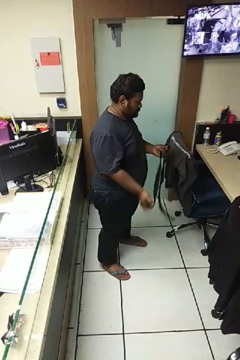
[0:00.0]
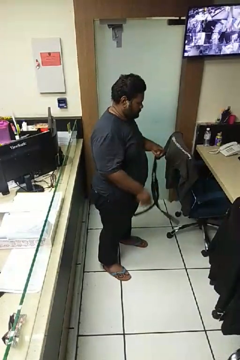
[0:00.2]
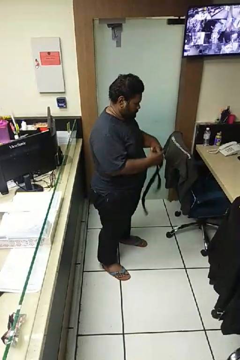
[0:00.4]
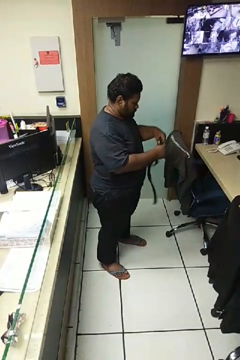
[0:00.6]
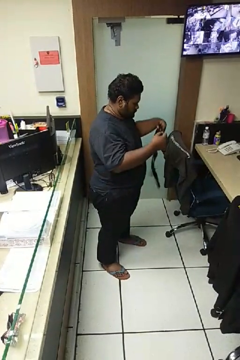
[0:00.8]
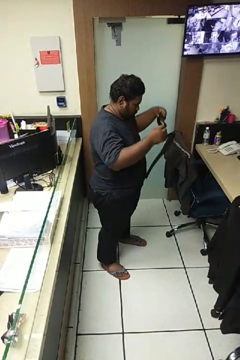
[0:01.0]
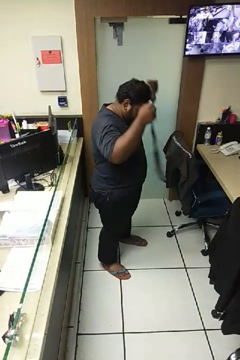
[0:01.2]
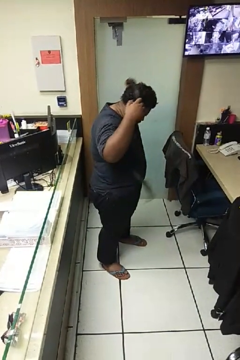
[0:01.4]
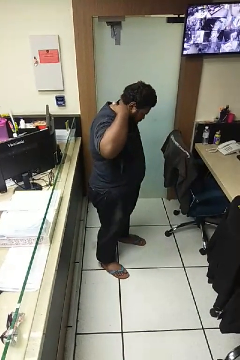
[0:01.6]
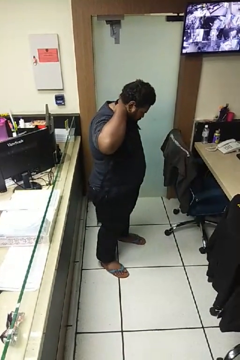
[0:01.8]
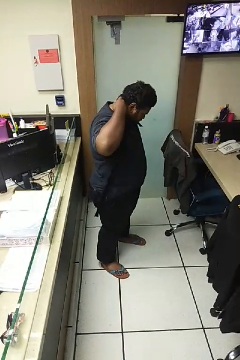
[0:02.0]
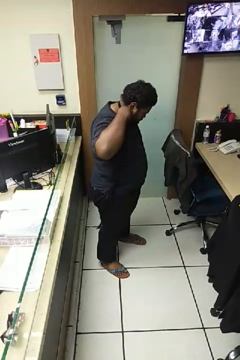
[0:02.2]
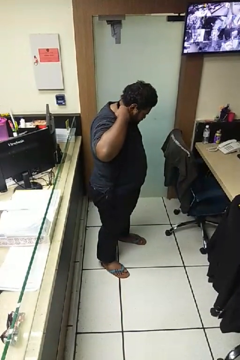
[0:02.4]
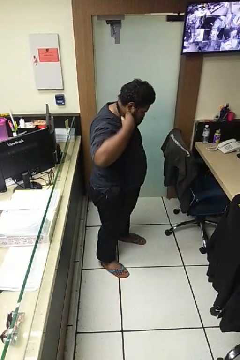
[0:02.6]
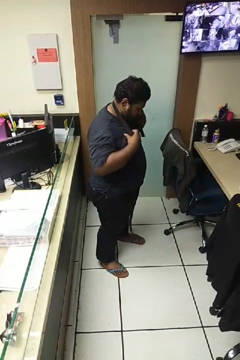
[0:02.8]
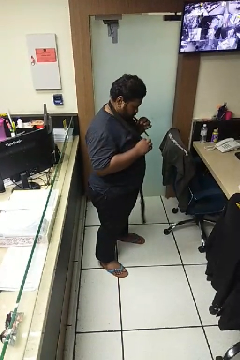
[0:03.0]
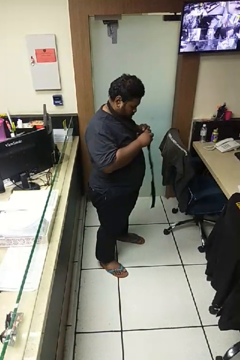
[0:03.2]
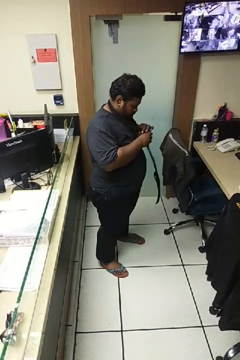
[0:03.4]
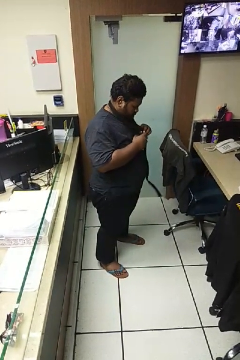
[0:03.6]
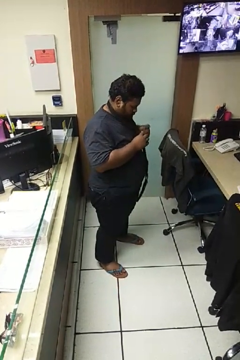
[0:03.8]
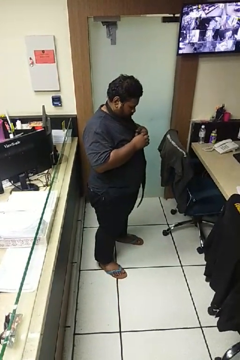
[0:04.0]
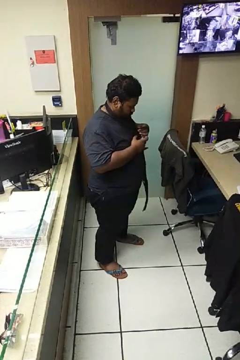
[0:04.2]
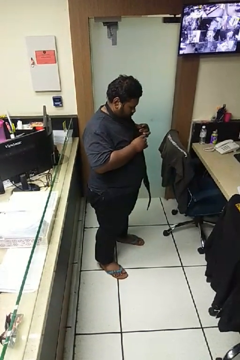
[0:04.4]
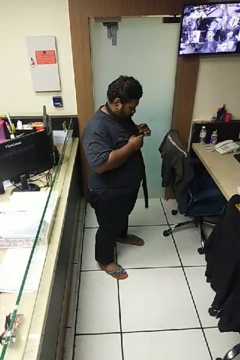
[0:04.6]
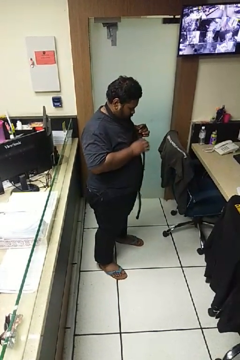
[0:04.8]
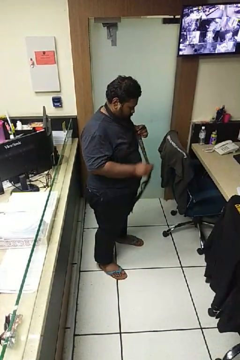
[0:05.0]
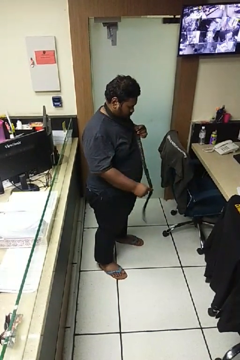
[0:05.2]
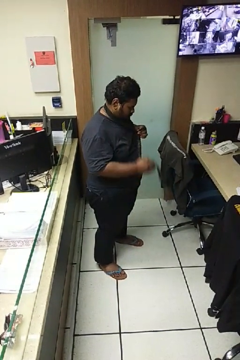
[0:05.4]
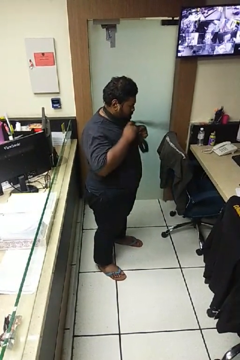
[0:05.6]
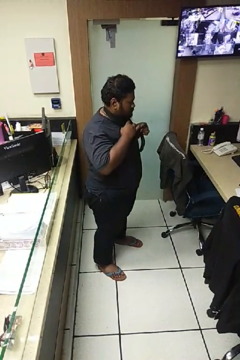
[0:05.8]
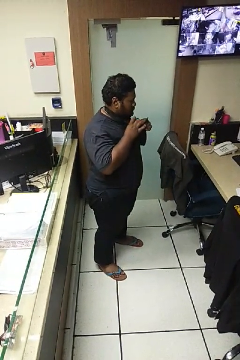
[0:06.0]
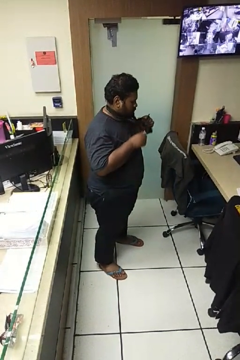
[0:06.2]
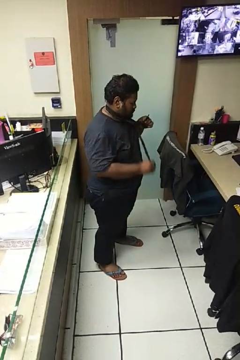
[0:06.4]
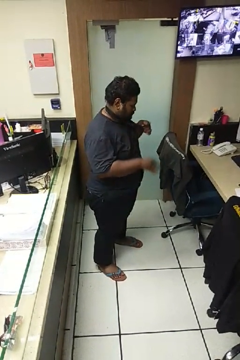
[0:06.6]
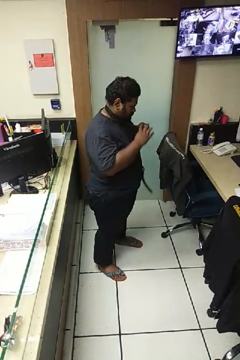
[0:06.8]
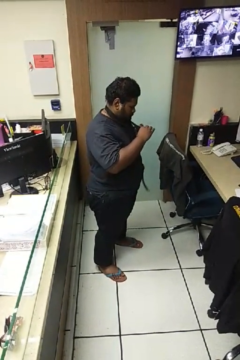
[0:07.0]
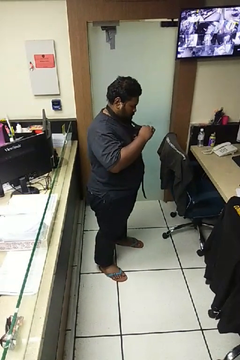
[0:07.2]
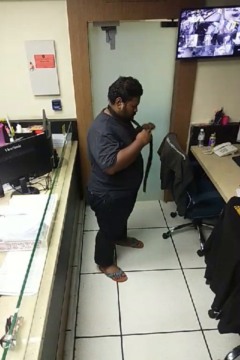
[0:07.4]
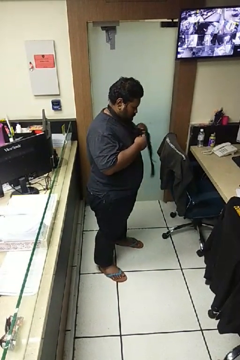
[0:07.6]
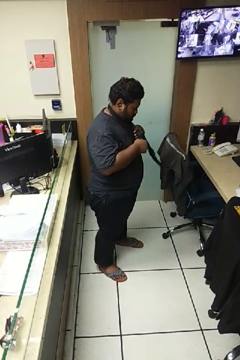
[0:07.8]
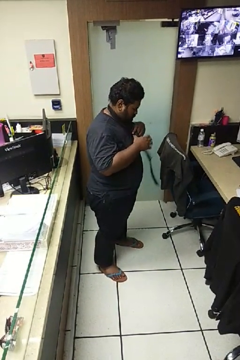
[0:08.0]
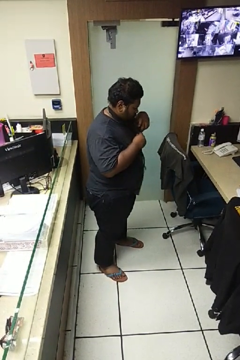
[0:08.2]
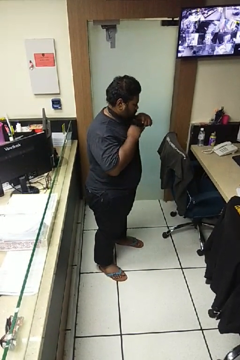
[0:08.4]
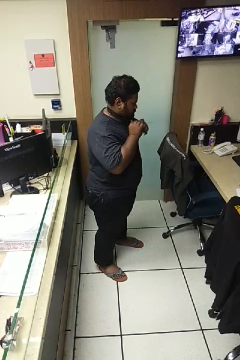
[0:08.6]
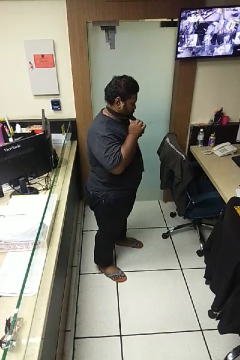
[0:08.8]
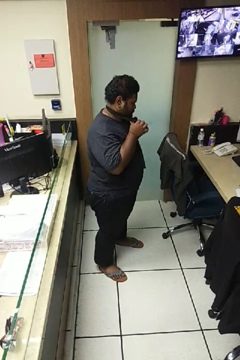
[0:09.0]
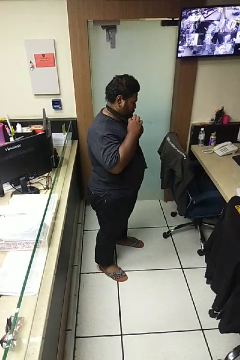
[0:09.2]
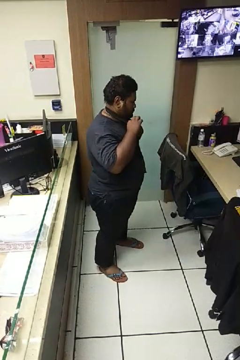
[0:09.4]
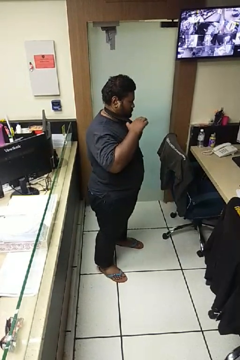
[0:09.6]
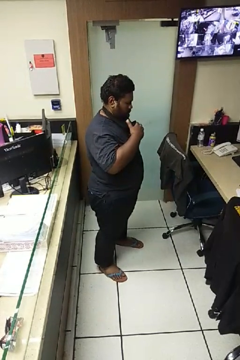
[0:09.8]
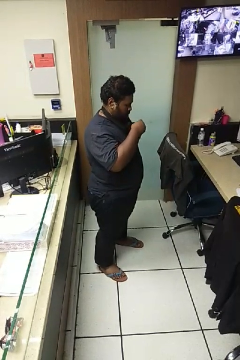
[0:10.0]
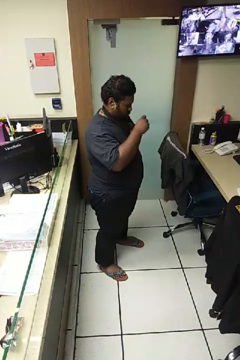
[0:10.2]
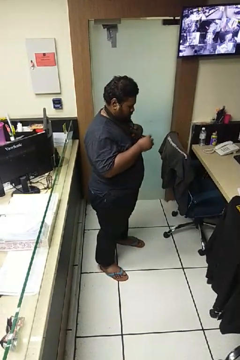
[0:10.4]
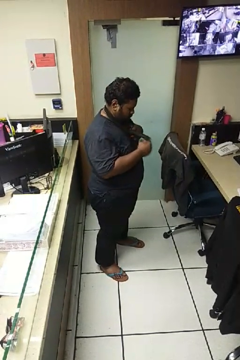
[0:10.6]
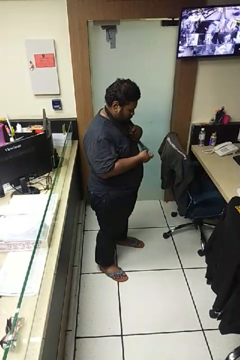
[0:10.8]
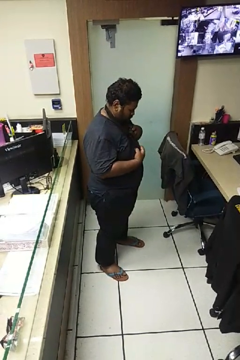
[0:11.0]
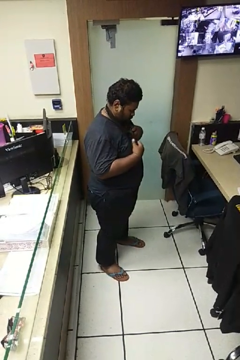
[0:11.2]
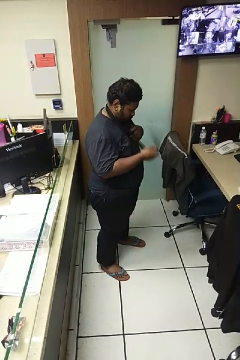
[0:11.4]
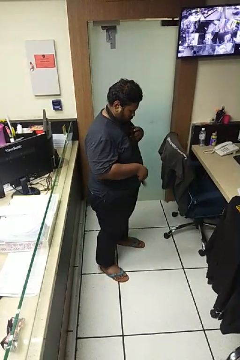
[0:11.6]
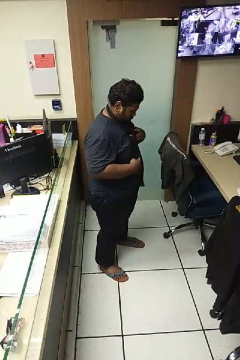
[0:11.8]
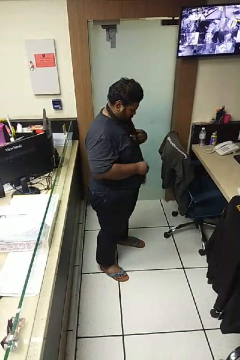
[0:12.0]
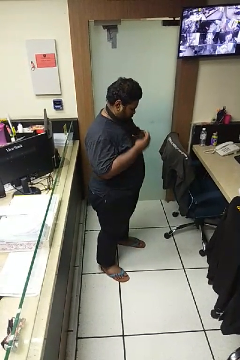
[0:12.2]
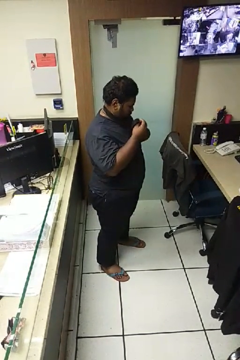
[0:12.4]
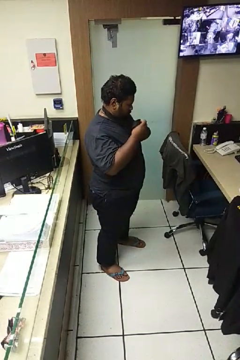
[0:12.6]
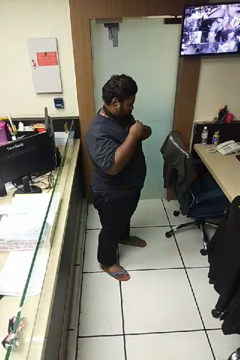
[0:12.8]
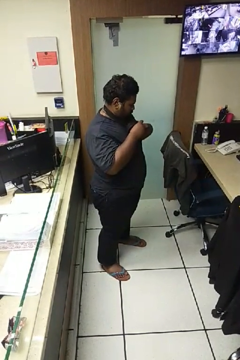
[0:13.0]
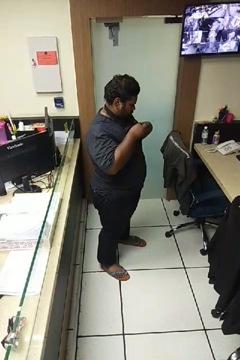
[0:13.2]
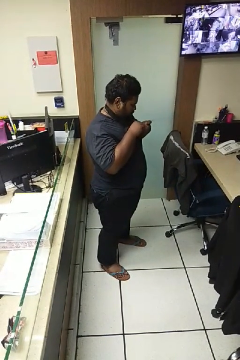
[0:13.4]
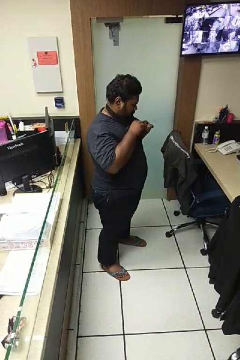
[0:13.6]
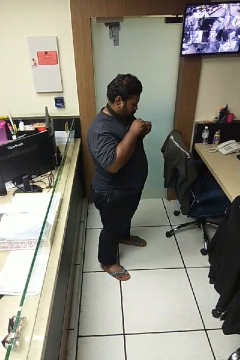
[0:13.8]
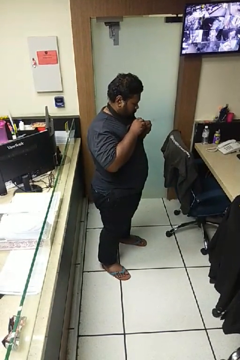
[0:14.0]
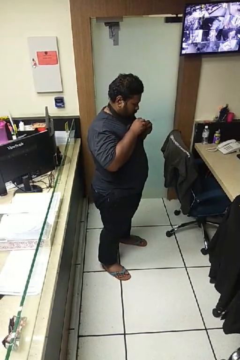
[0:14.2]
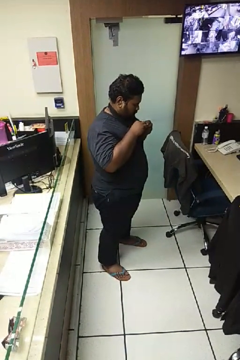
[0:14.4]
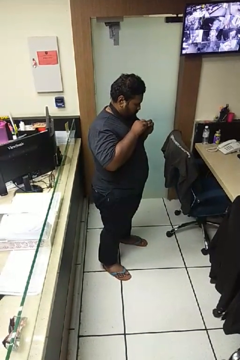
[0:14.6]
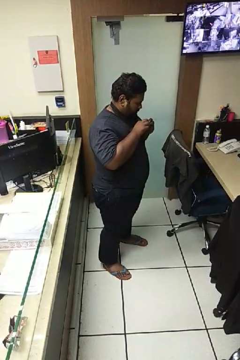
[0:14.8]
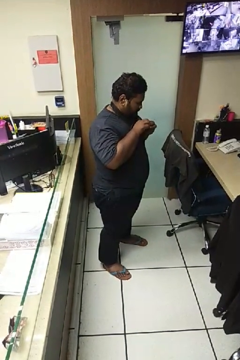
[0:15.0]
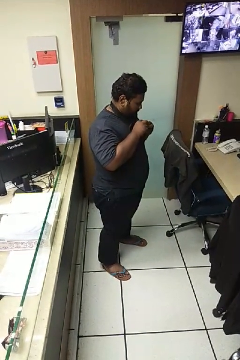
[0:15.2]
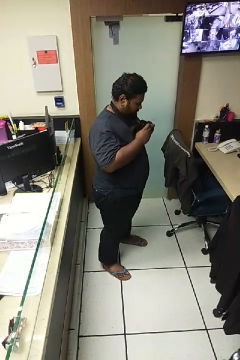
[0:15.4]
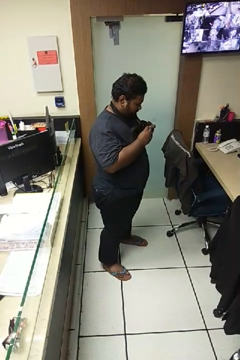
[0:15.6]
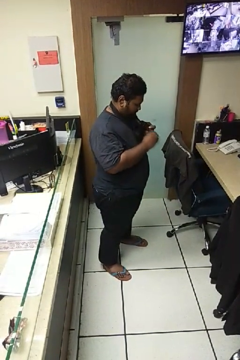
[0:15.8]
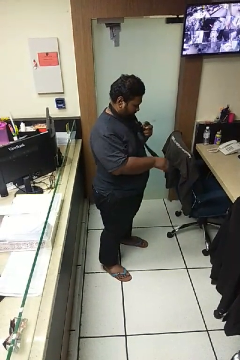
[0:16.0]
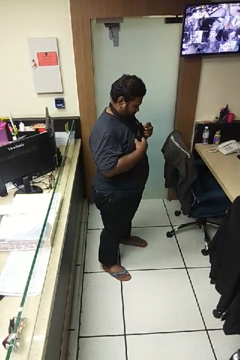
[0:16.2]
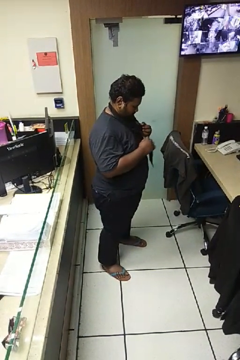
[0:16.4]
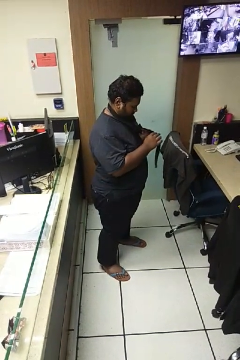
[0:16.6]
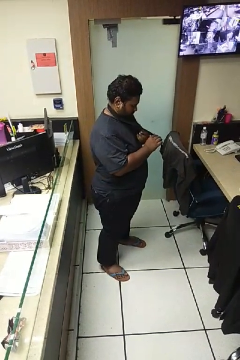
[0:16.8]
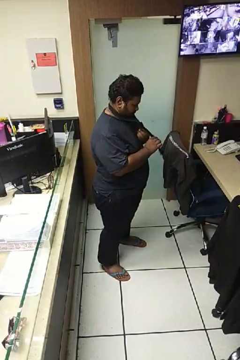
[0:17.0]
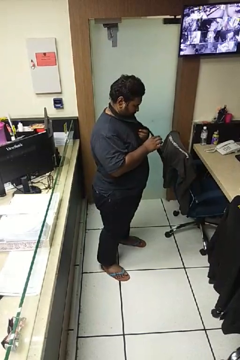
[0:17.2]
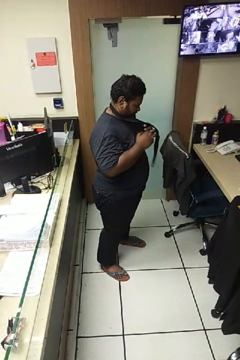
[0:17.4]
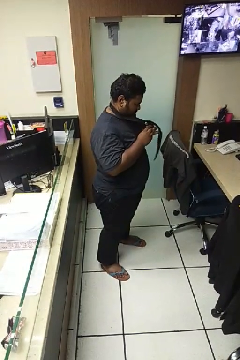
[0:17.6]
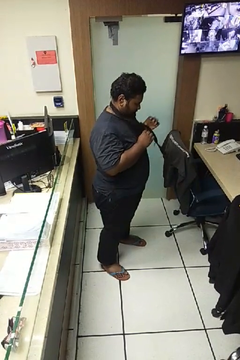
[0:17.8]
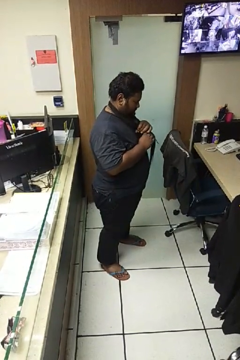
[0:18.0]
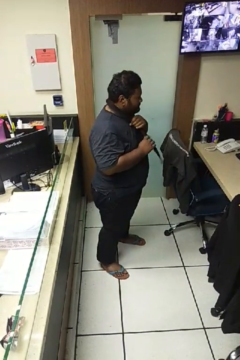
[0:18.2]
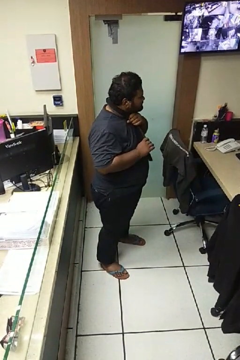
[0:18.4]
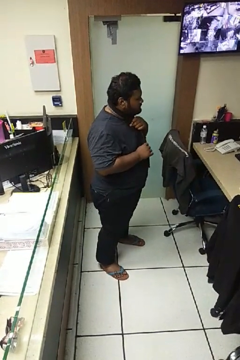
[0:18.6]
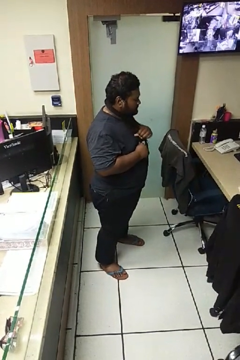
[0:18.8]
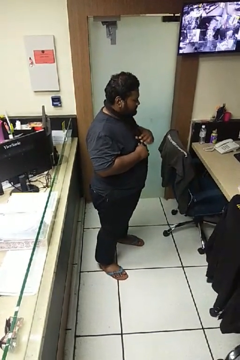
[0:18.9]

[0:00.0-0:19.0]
person puts on necktie

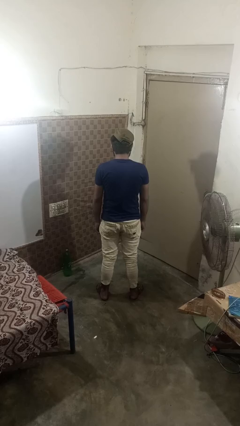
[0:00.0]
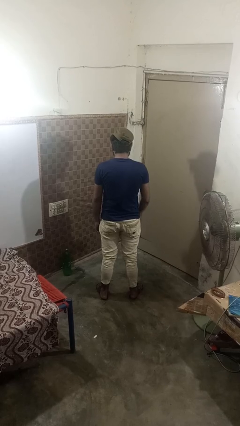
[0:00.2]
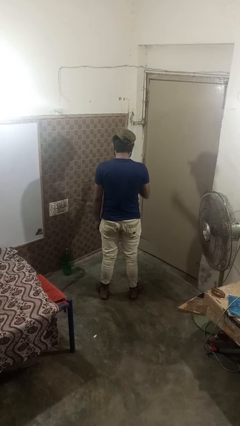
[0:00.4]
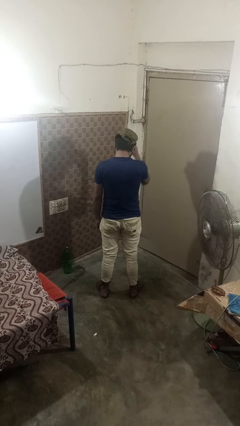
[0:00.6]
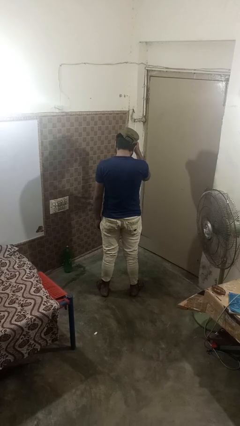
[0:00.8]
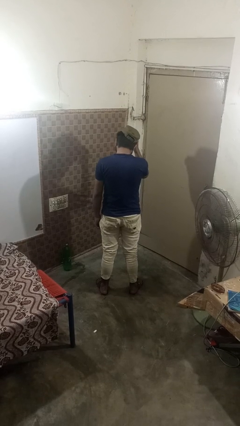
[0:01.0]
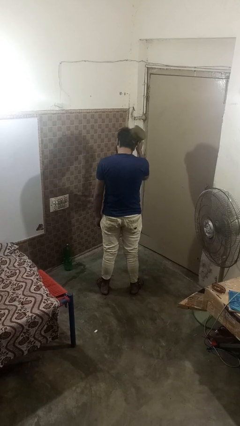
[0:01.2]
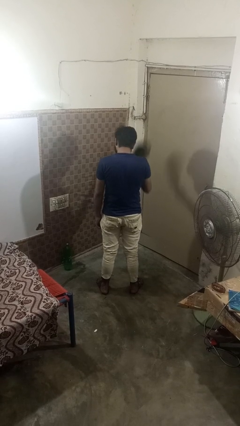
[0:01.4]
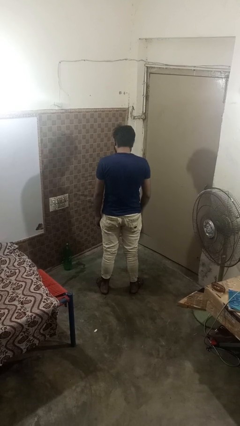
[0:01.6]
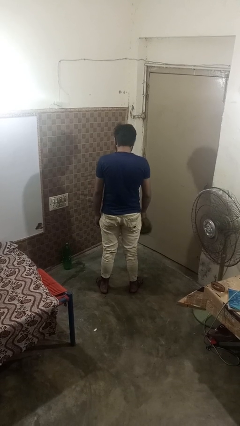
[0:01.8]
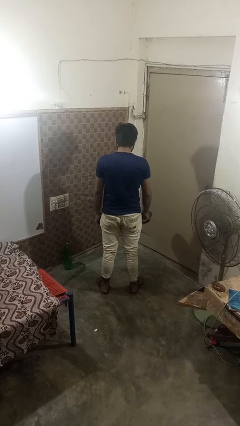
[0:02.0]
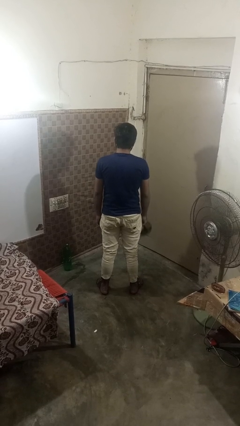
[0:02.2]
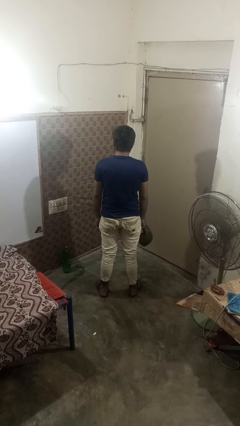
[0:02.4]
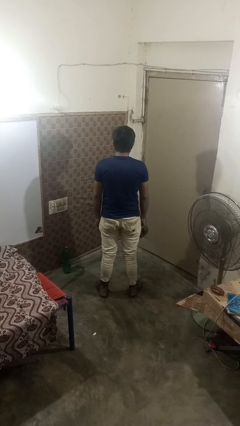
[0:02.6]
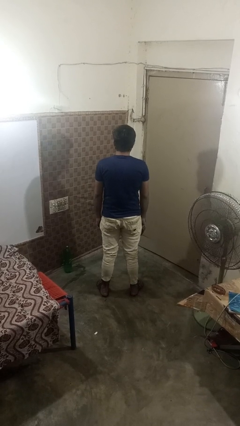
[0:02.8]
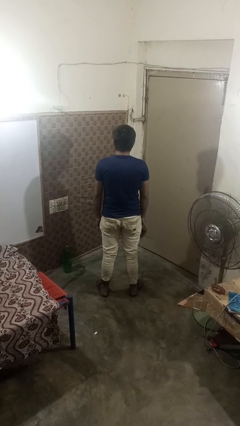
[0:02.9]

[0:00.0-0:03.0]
person takes off hat
